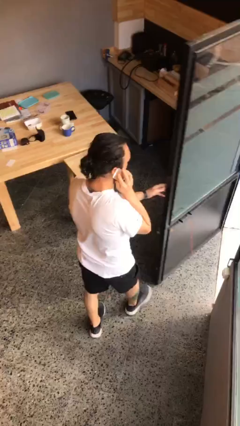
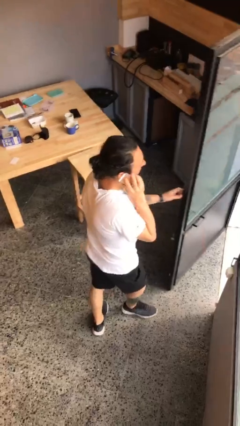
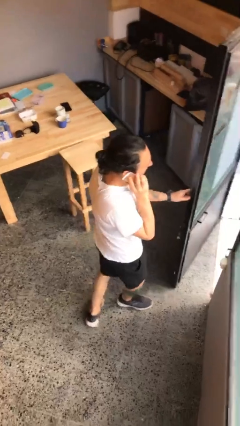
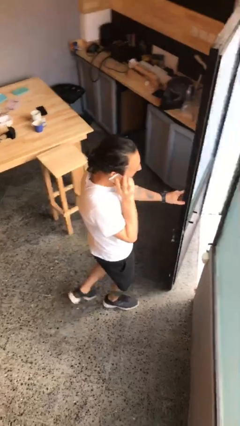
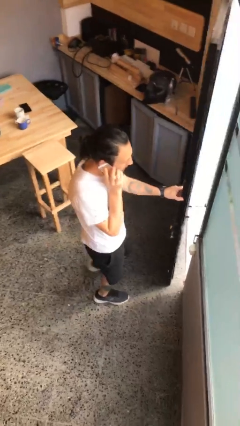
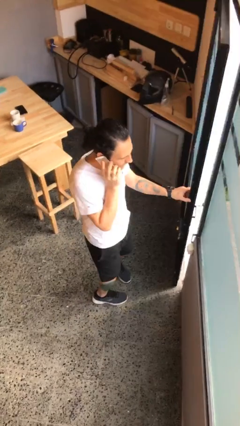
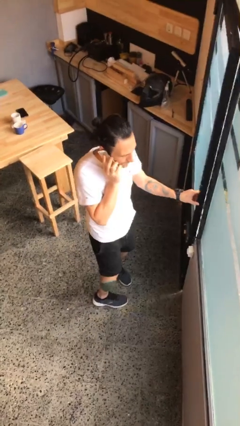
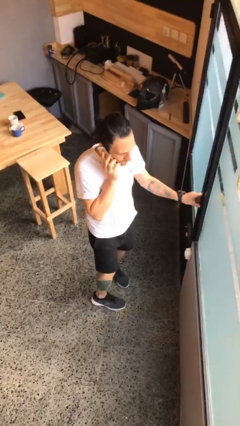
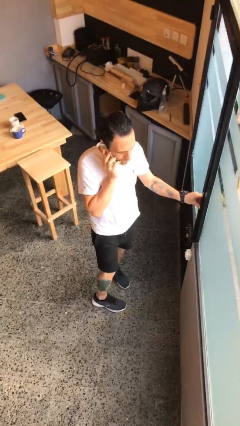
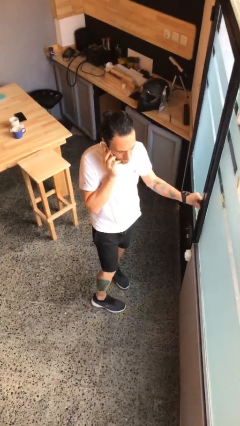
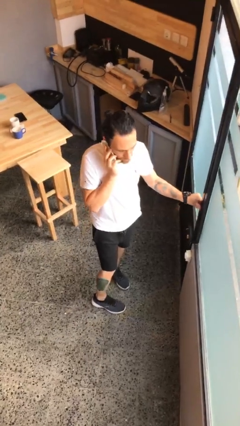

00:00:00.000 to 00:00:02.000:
person closes facility door

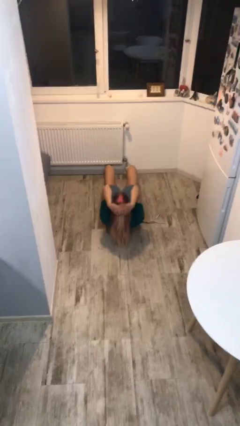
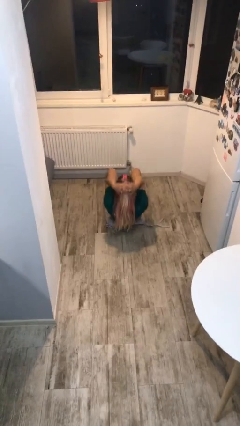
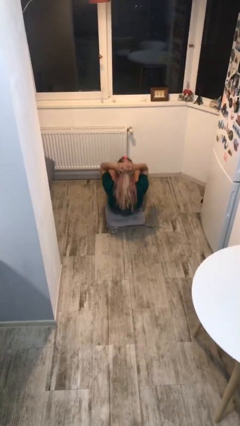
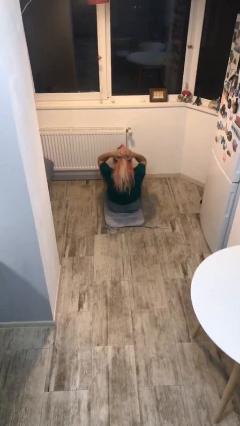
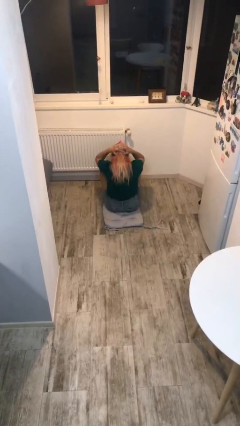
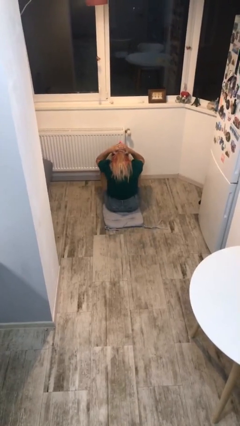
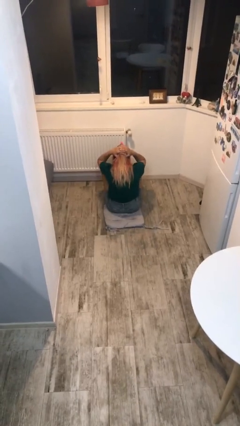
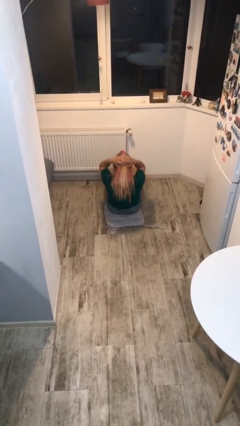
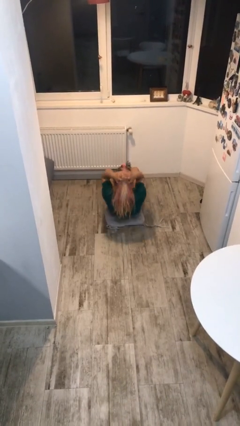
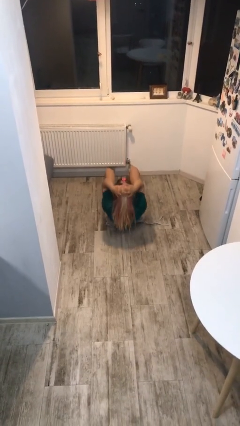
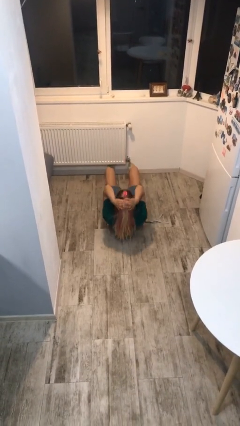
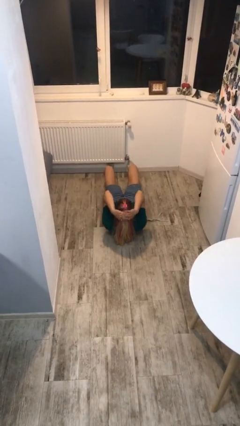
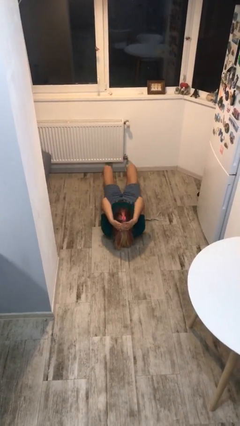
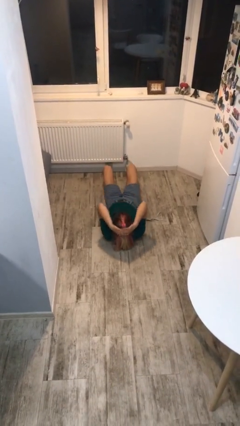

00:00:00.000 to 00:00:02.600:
person exercises with situp

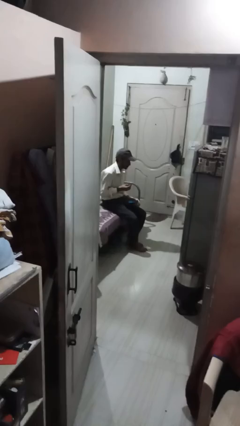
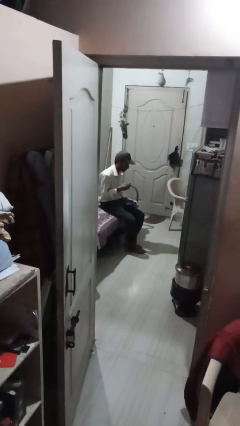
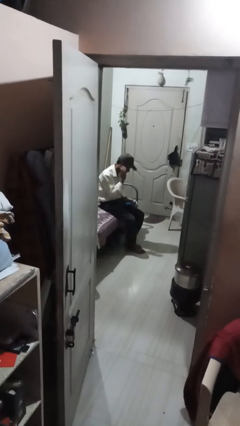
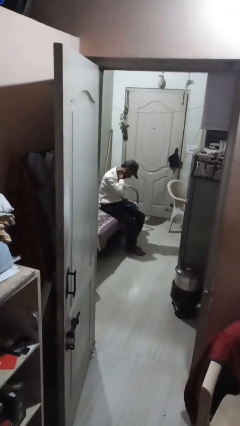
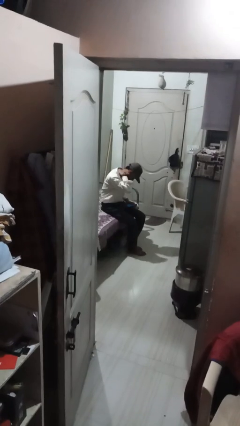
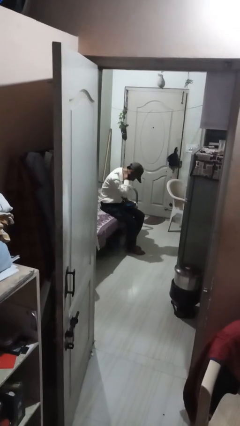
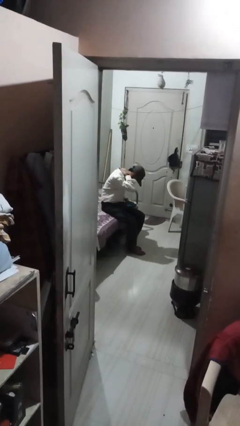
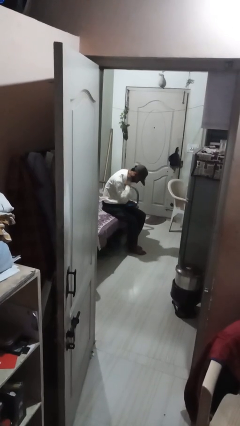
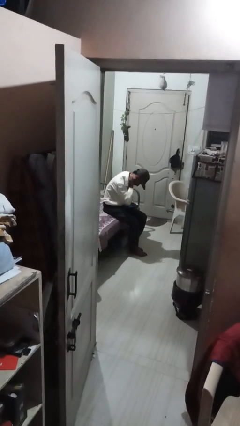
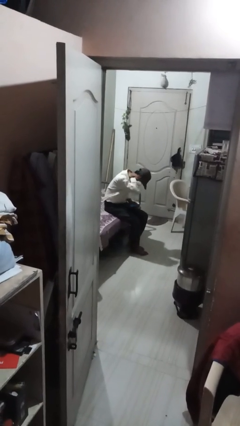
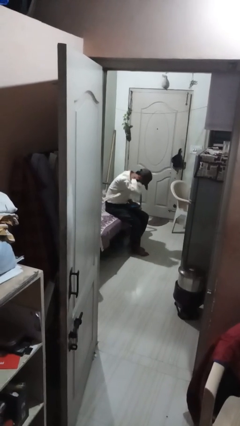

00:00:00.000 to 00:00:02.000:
person applies facial moisturizer

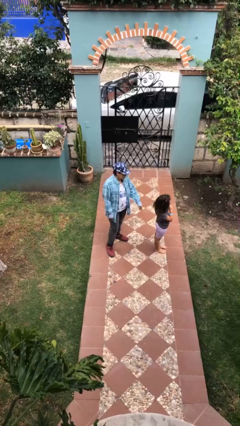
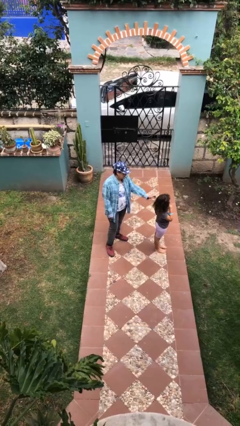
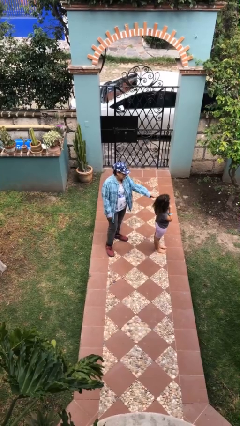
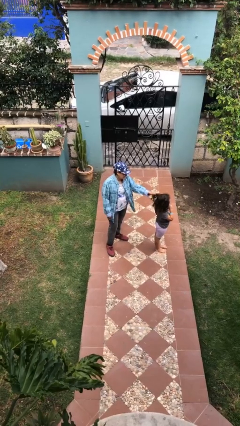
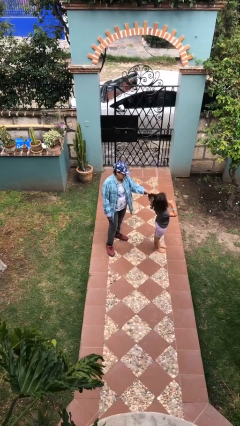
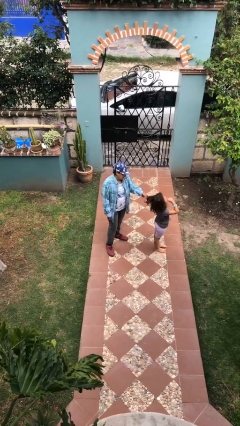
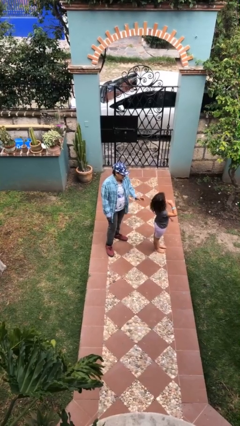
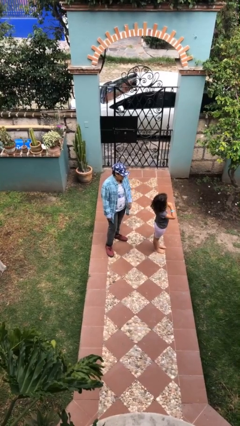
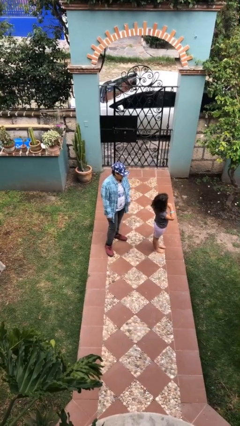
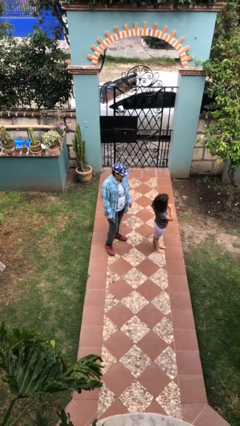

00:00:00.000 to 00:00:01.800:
person grabs person by hair

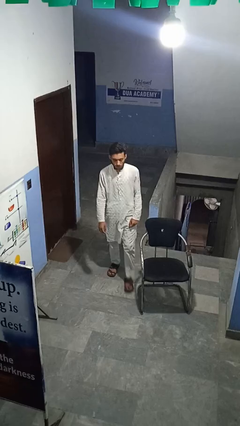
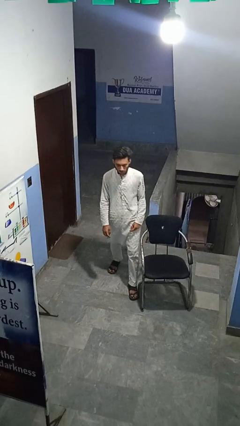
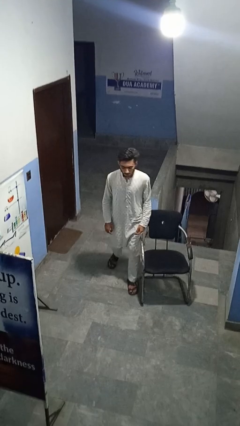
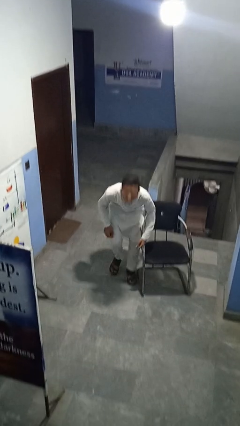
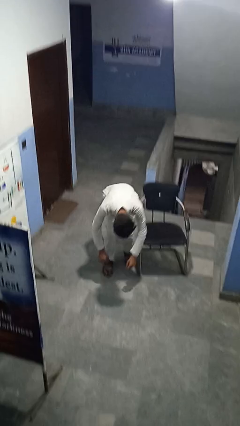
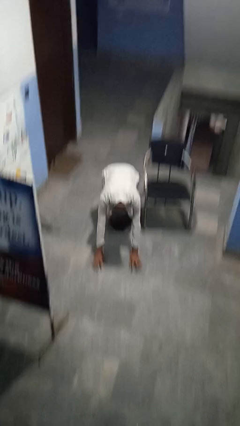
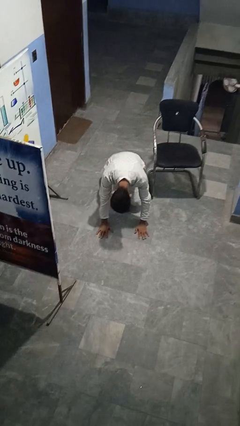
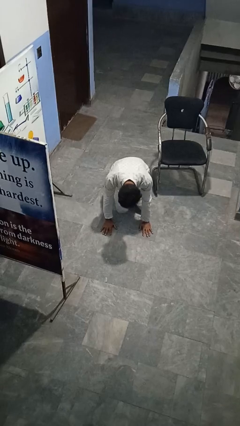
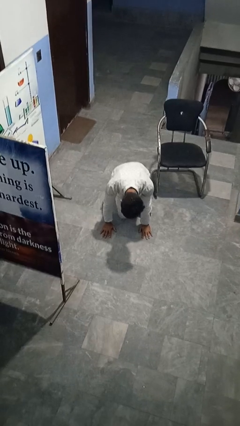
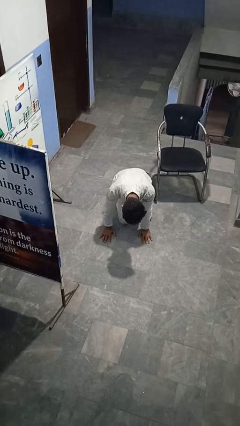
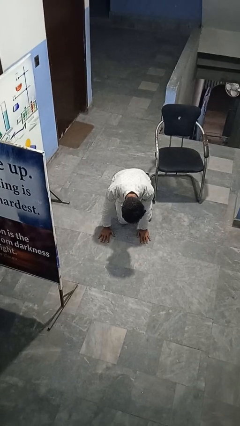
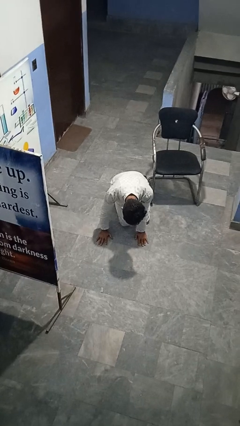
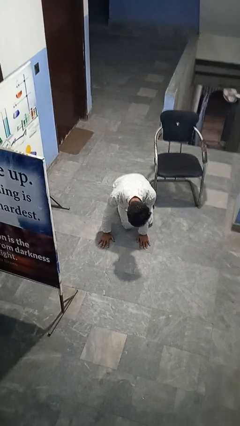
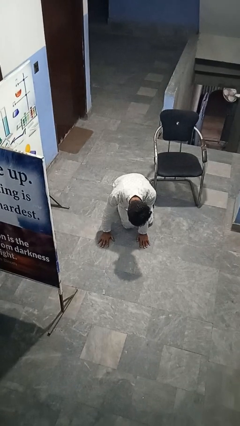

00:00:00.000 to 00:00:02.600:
person trips on object on floor

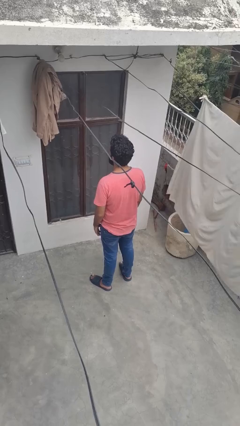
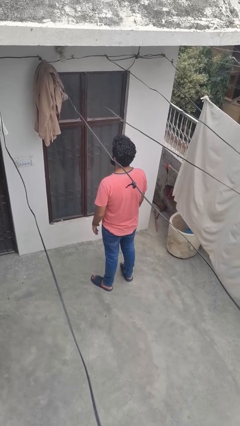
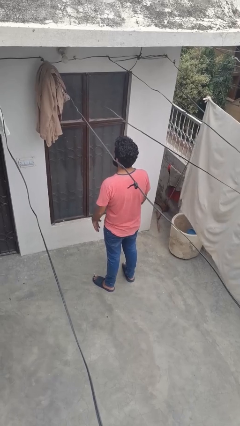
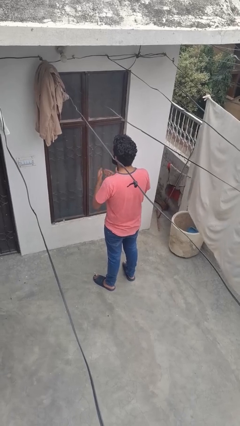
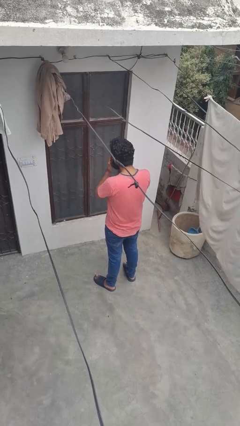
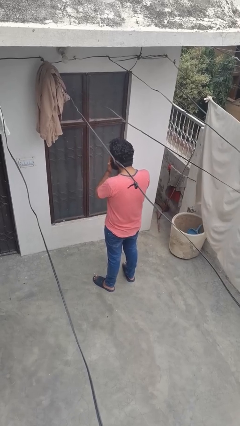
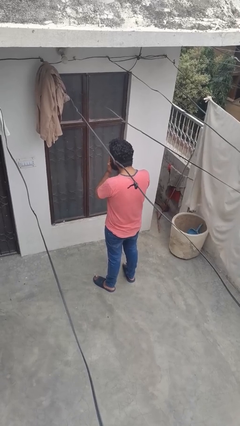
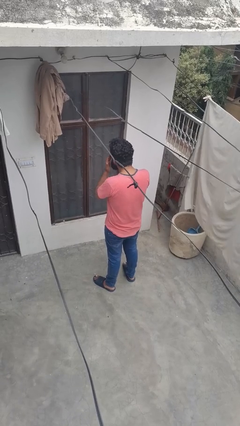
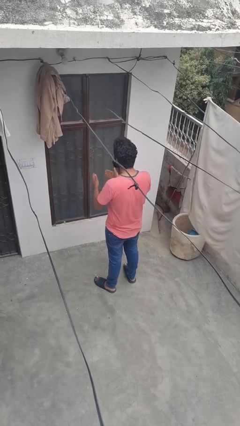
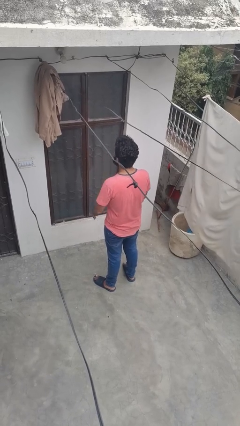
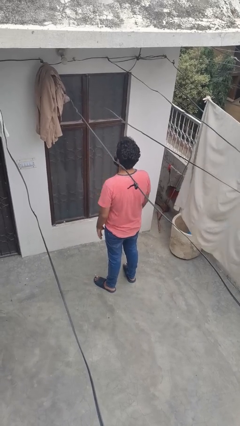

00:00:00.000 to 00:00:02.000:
person covers face with hands

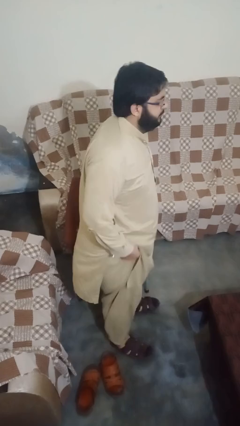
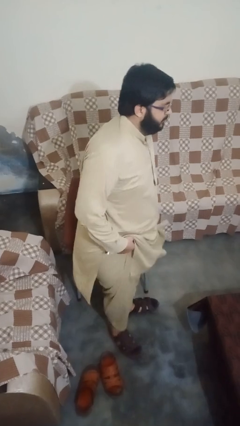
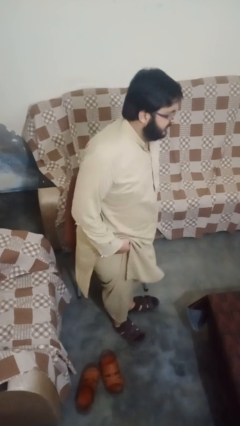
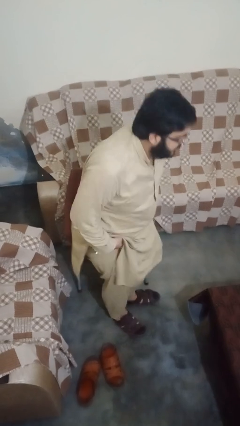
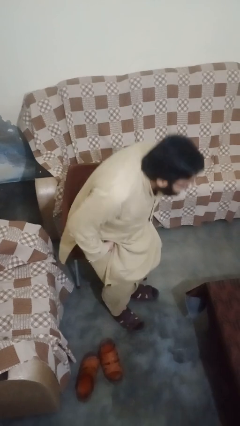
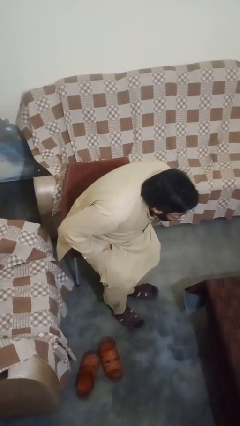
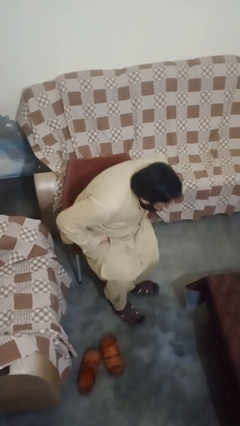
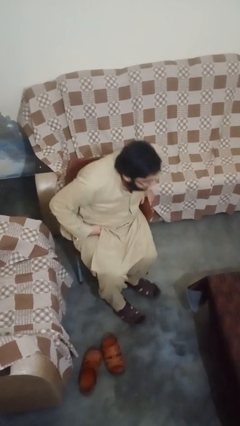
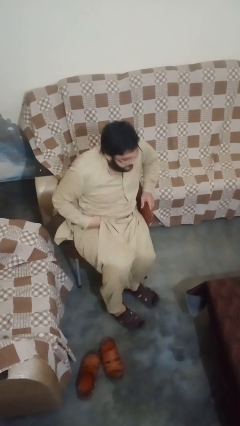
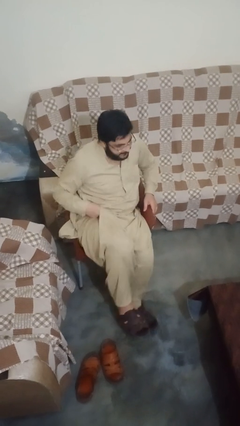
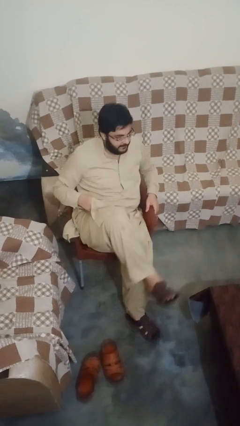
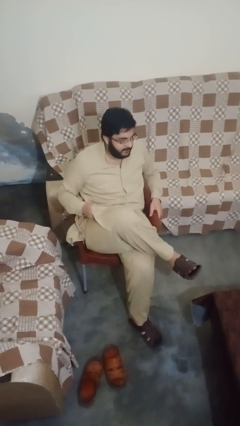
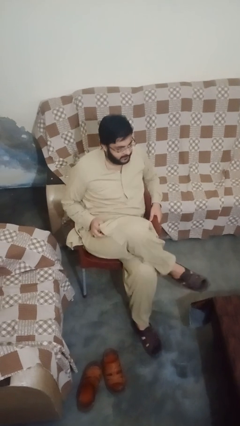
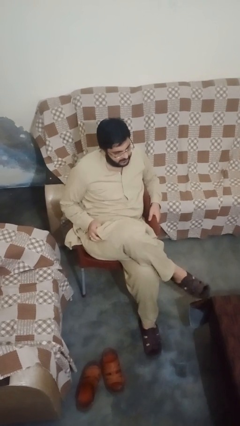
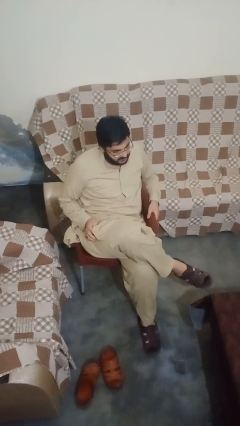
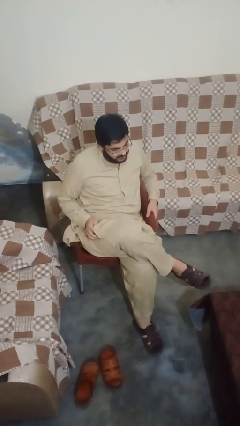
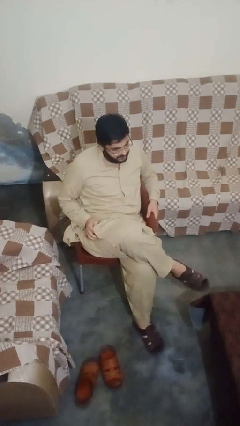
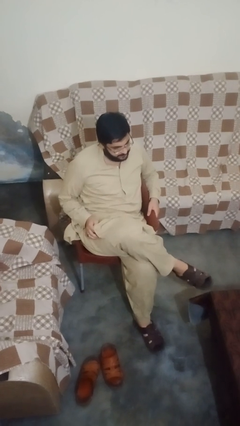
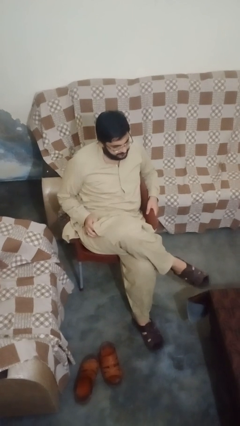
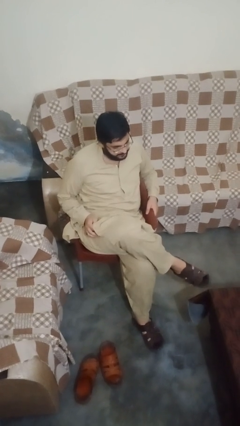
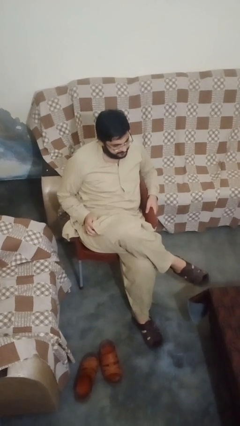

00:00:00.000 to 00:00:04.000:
person sits down

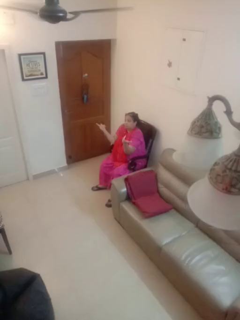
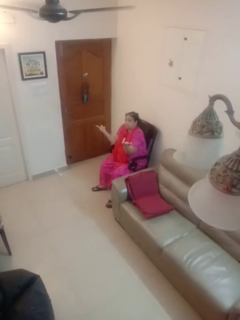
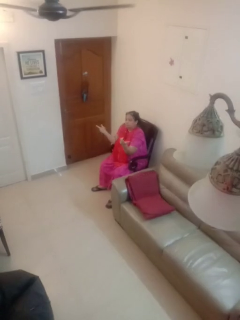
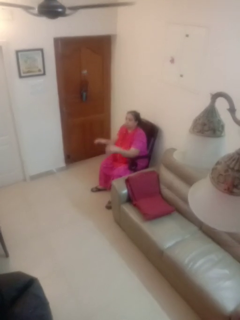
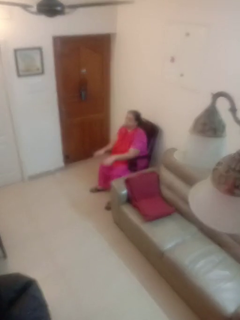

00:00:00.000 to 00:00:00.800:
person shrugs
